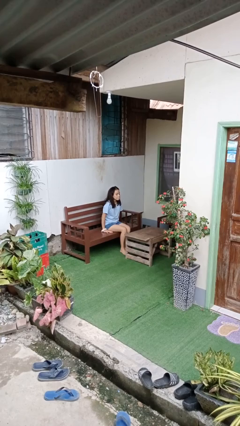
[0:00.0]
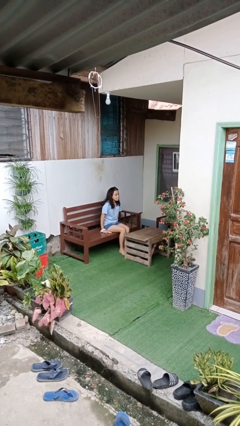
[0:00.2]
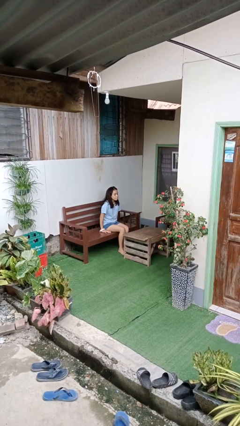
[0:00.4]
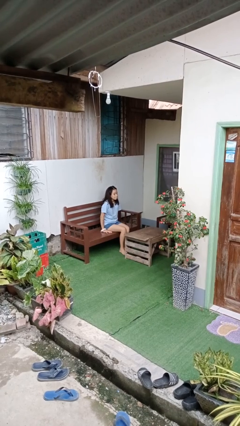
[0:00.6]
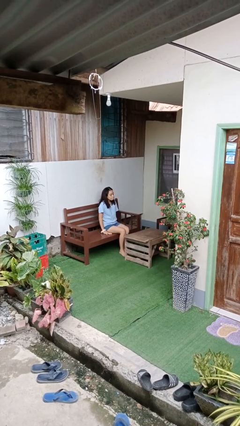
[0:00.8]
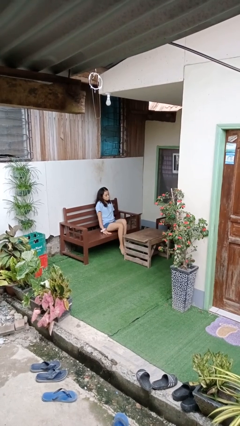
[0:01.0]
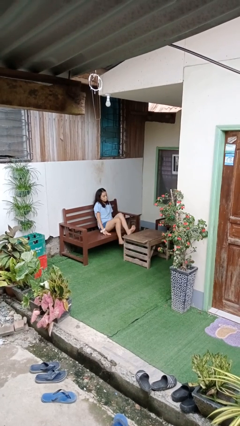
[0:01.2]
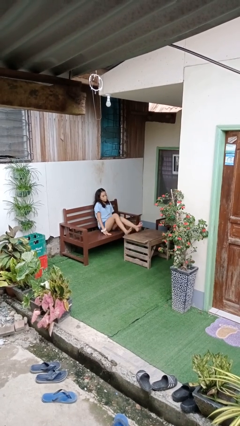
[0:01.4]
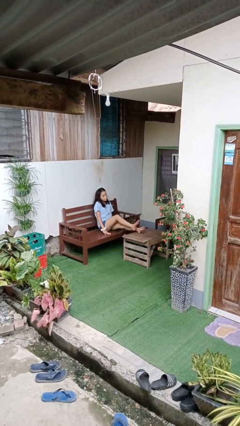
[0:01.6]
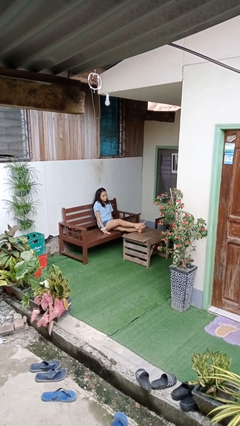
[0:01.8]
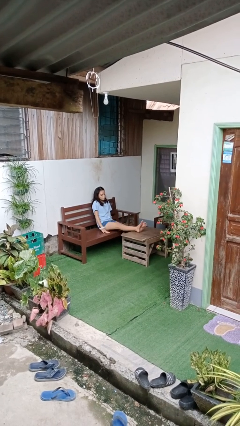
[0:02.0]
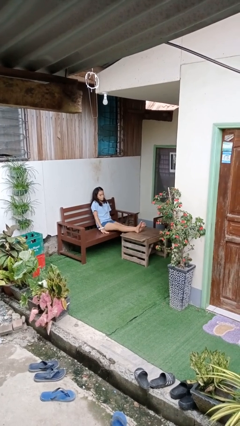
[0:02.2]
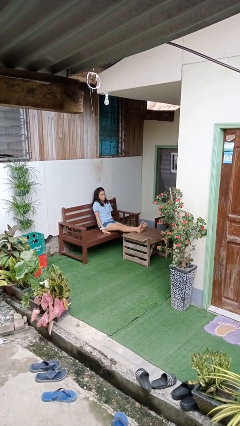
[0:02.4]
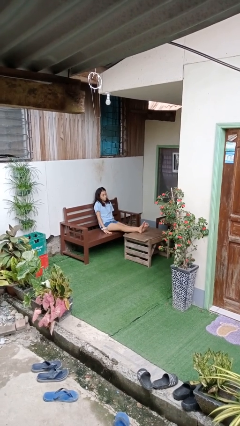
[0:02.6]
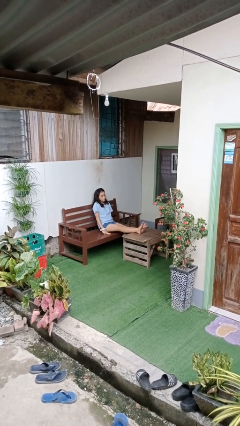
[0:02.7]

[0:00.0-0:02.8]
person puts feet up

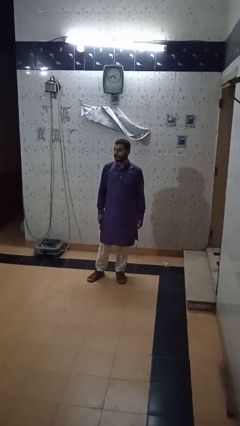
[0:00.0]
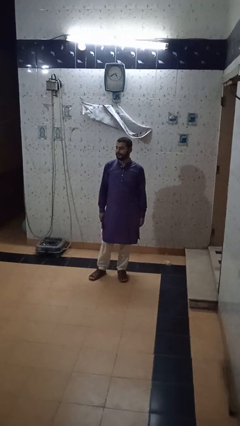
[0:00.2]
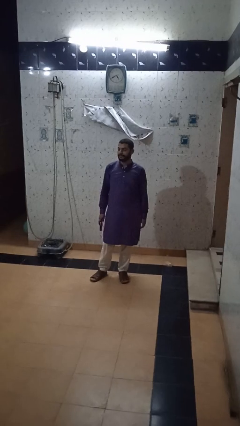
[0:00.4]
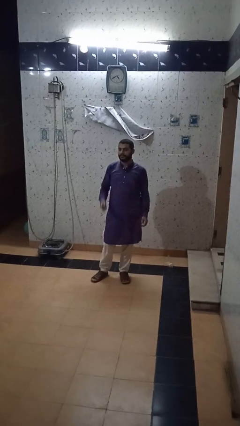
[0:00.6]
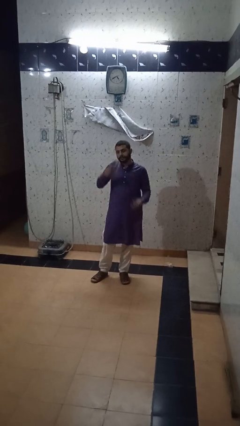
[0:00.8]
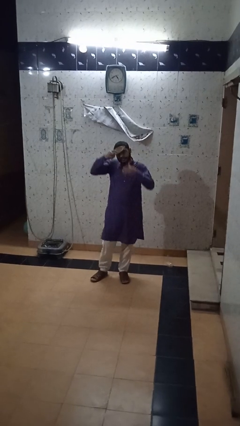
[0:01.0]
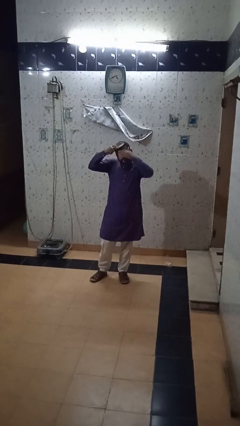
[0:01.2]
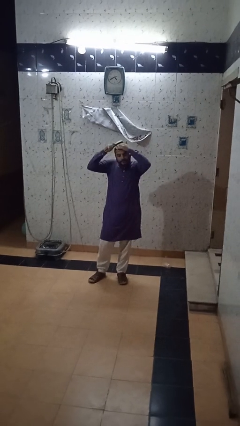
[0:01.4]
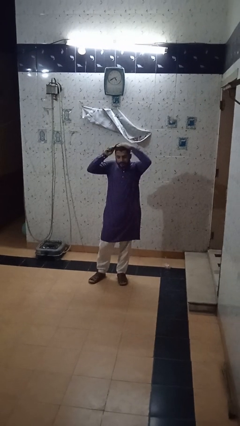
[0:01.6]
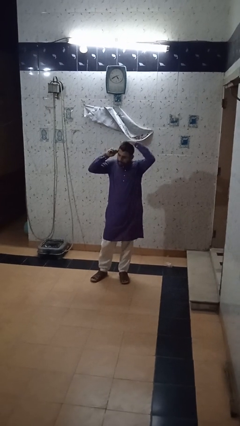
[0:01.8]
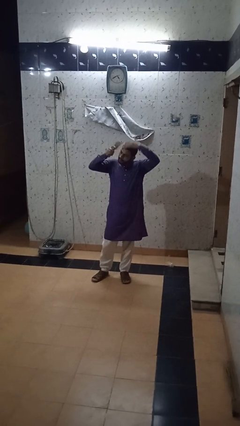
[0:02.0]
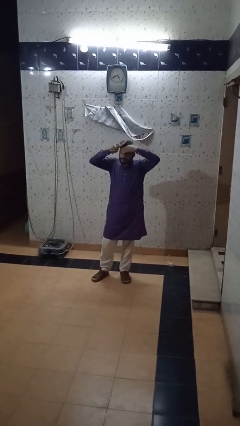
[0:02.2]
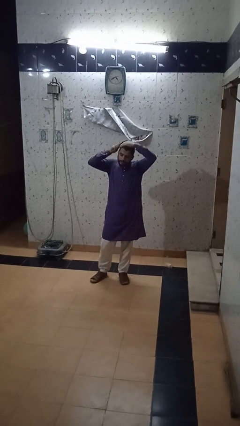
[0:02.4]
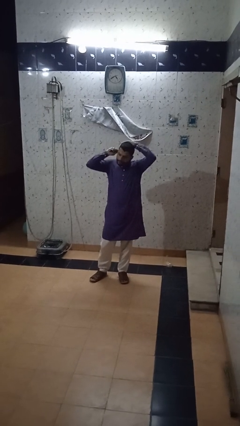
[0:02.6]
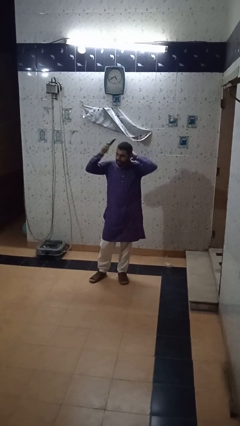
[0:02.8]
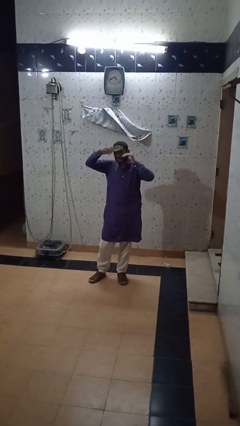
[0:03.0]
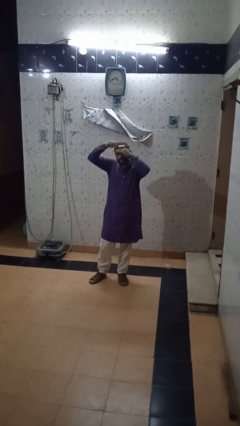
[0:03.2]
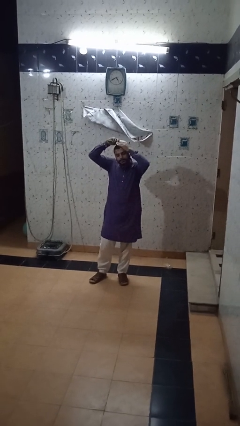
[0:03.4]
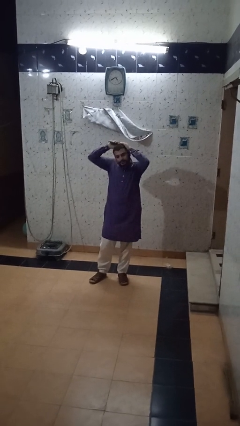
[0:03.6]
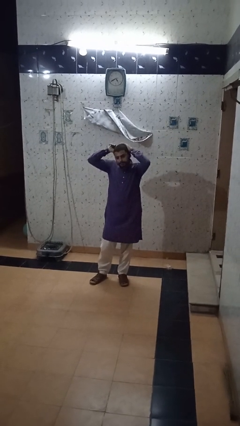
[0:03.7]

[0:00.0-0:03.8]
person brushes hair

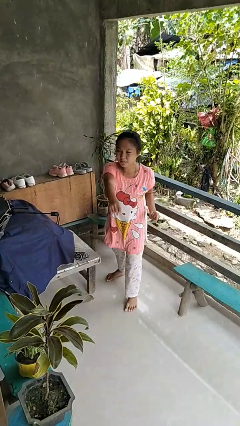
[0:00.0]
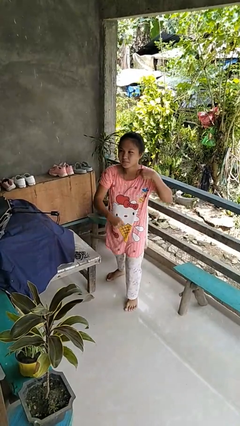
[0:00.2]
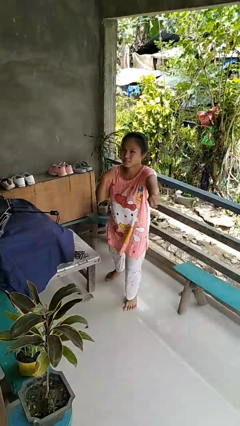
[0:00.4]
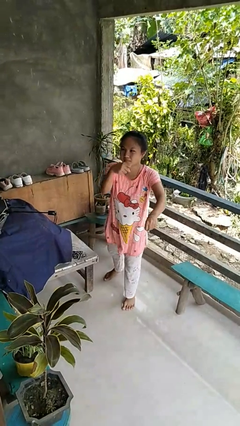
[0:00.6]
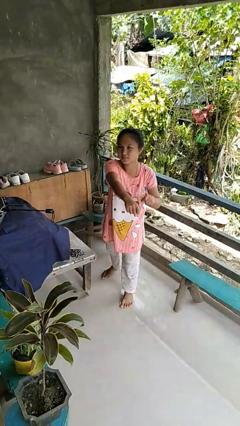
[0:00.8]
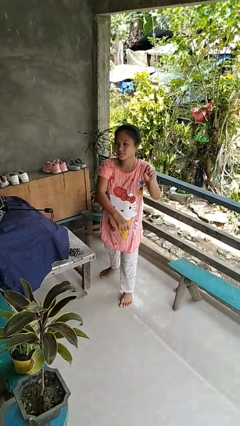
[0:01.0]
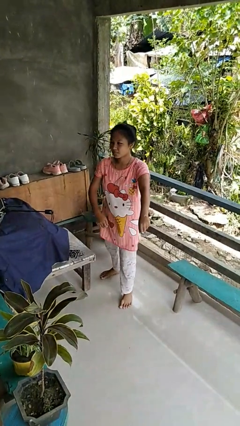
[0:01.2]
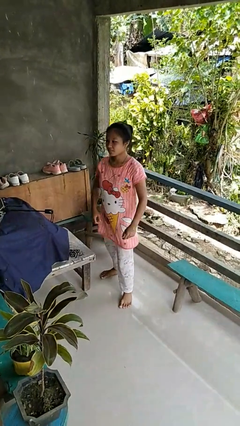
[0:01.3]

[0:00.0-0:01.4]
person karate chop

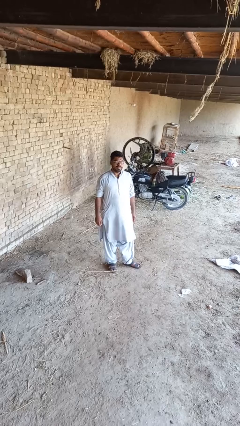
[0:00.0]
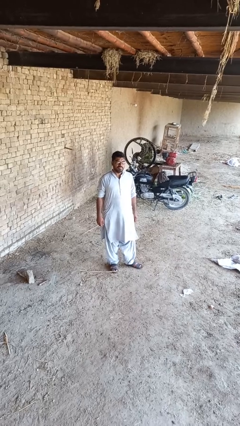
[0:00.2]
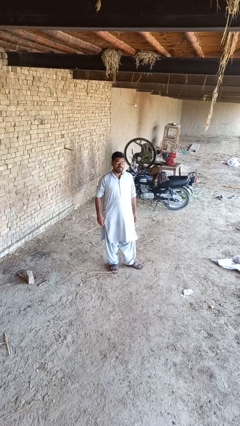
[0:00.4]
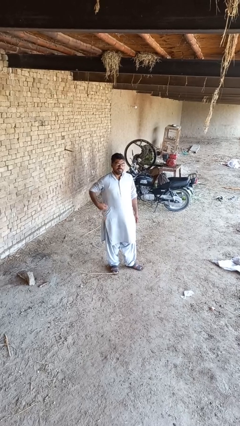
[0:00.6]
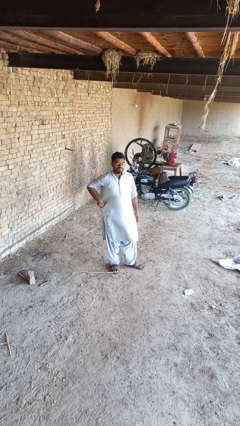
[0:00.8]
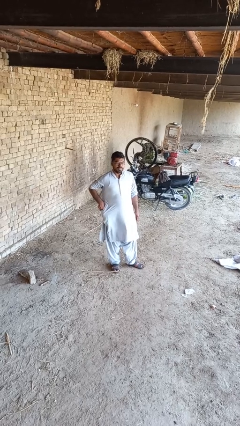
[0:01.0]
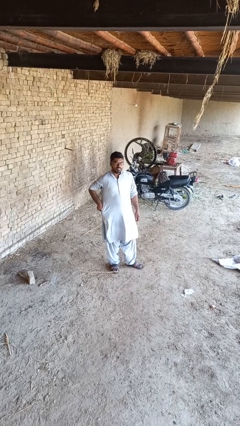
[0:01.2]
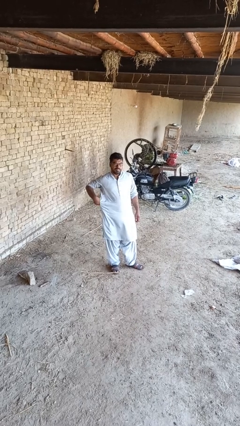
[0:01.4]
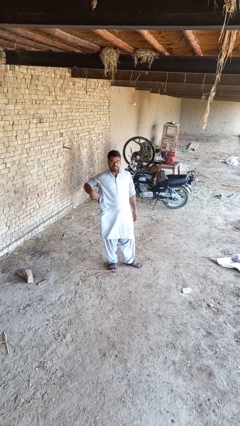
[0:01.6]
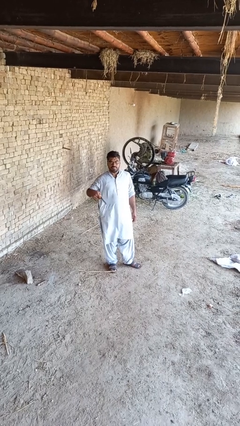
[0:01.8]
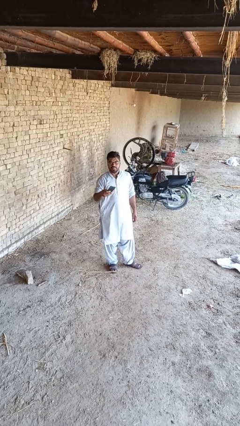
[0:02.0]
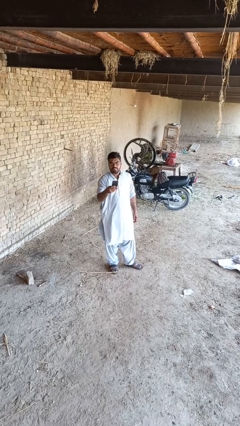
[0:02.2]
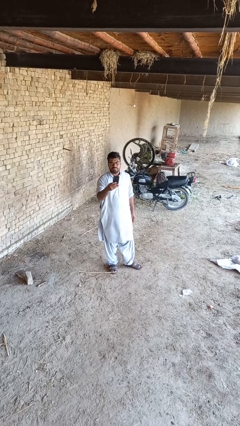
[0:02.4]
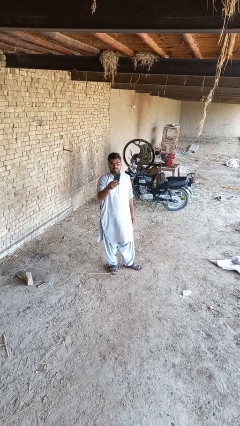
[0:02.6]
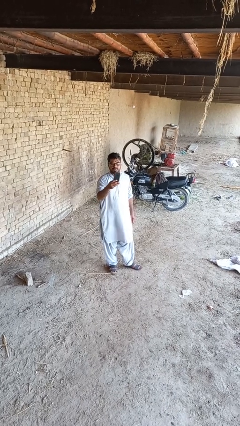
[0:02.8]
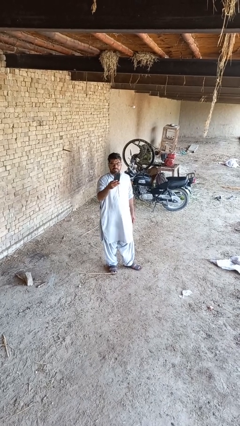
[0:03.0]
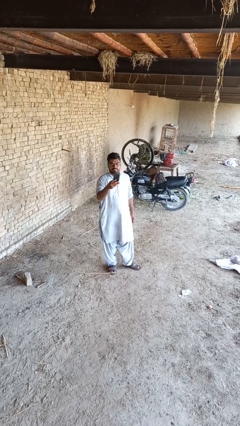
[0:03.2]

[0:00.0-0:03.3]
person takes phone from pocket

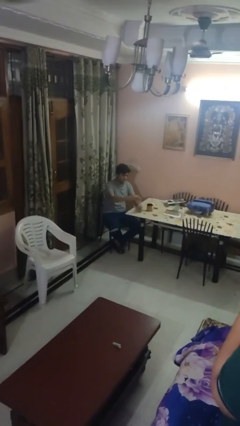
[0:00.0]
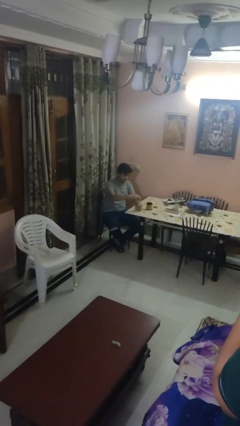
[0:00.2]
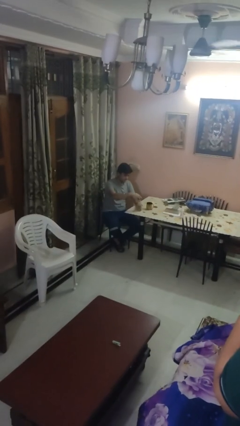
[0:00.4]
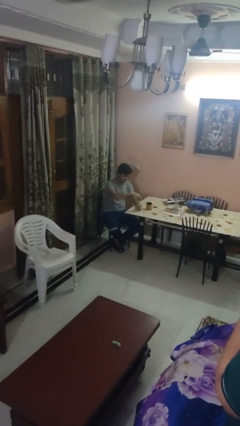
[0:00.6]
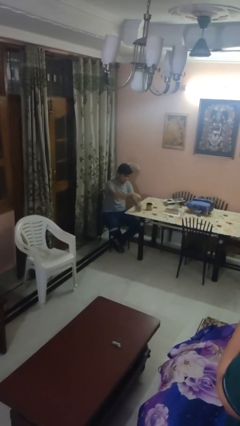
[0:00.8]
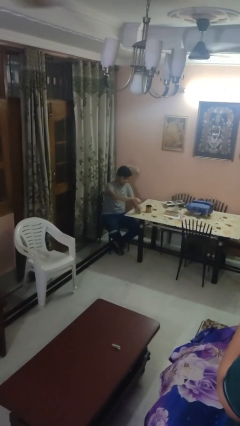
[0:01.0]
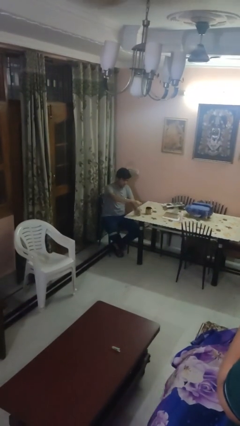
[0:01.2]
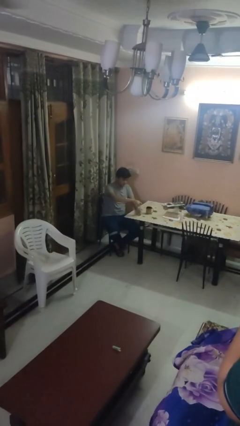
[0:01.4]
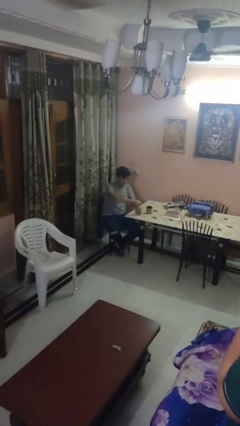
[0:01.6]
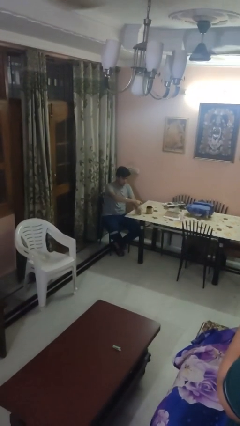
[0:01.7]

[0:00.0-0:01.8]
person screws lid to bottle

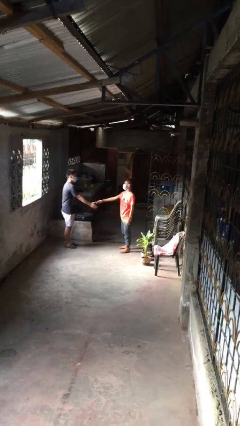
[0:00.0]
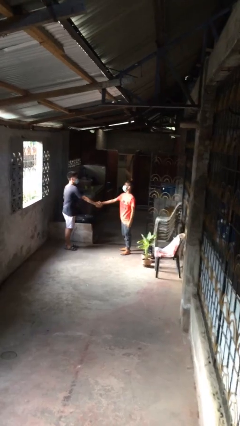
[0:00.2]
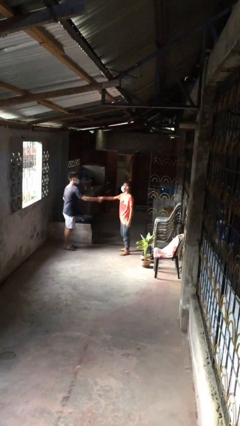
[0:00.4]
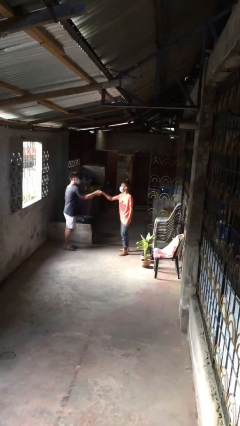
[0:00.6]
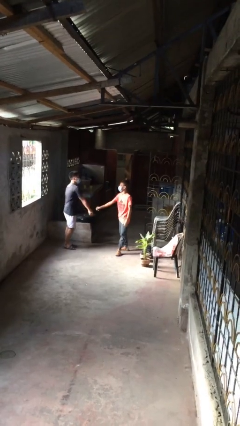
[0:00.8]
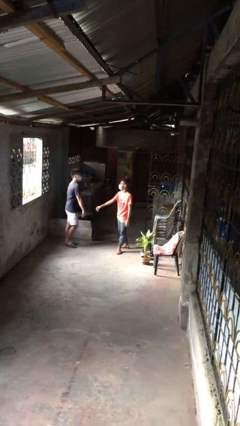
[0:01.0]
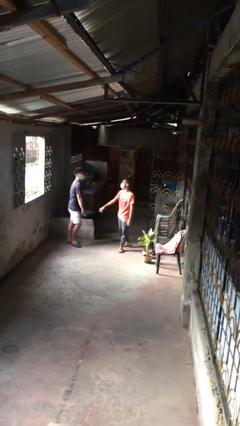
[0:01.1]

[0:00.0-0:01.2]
person shakes hand

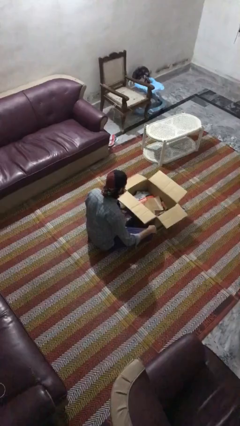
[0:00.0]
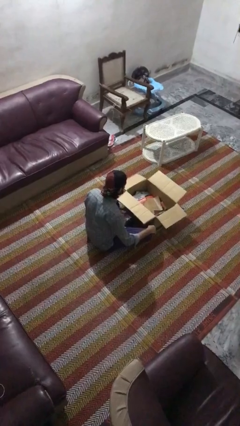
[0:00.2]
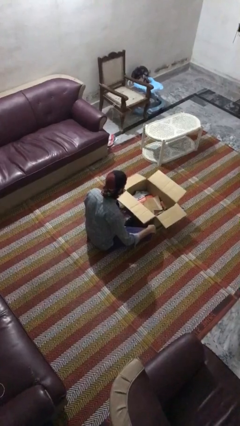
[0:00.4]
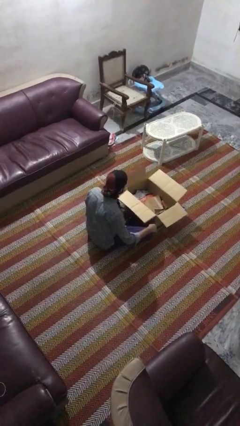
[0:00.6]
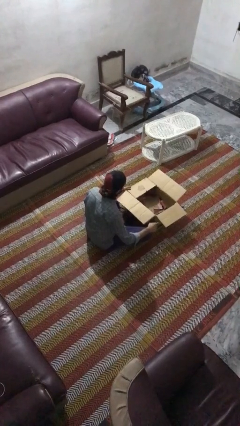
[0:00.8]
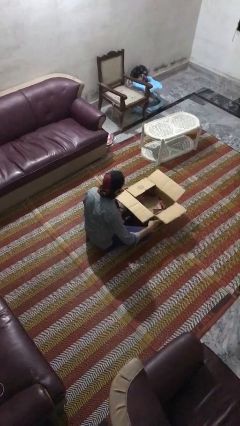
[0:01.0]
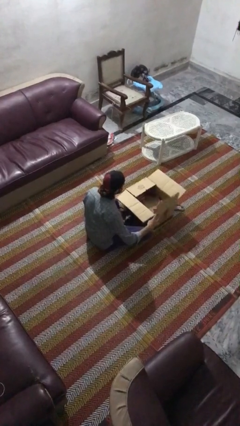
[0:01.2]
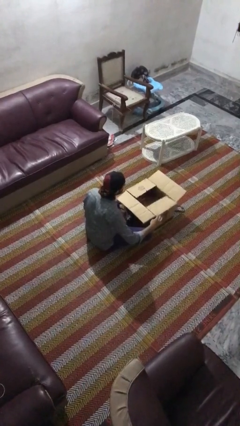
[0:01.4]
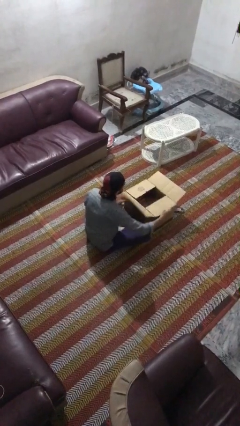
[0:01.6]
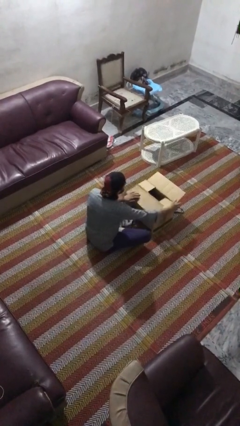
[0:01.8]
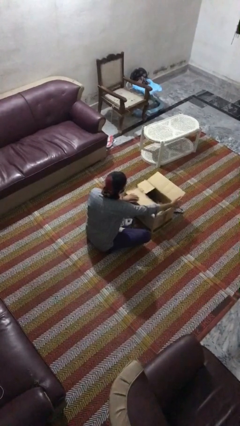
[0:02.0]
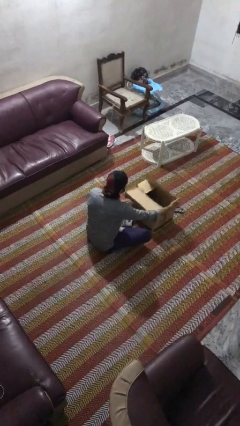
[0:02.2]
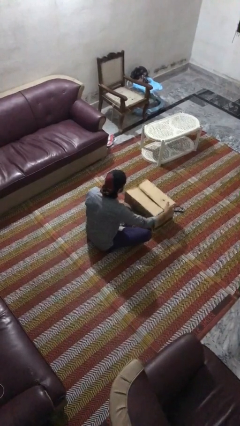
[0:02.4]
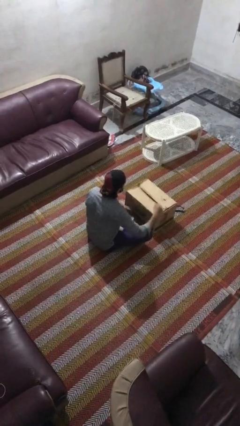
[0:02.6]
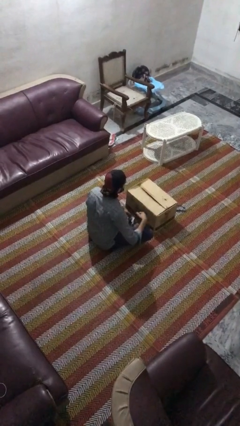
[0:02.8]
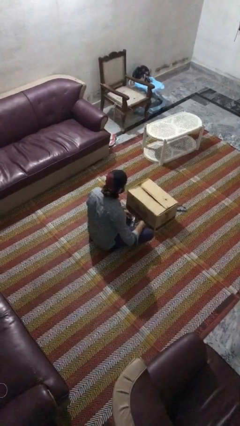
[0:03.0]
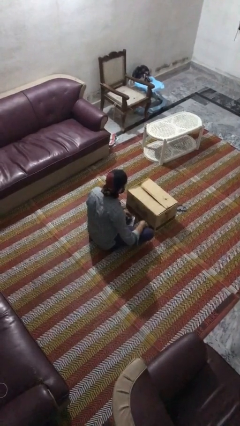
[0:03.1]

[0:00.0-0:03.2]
person closes box
